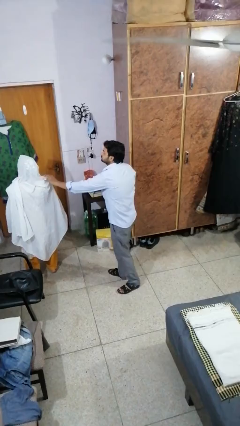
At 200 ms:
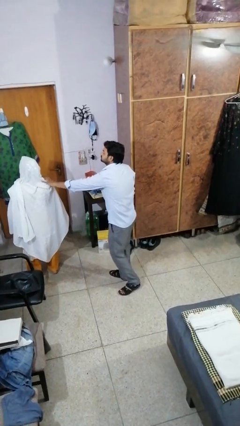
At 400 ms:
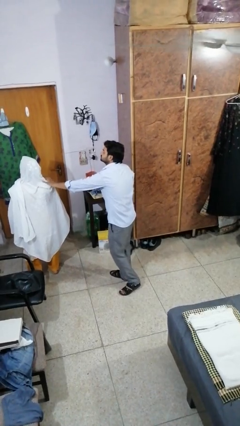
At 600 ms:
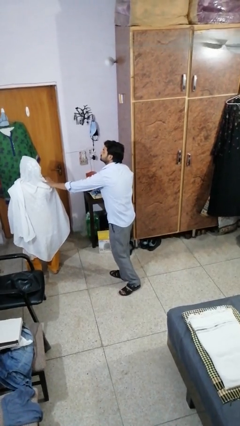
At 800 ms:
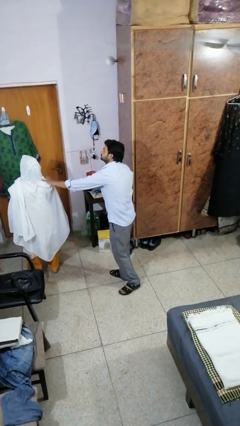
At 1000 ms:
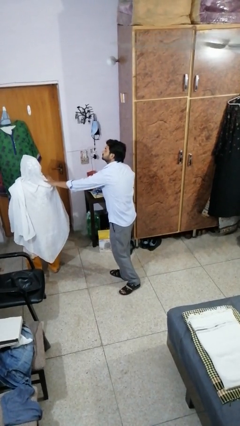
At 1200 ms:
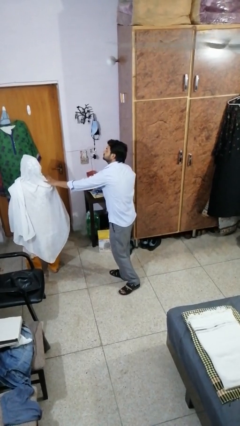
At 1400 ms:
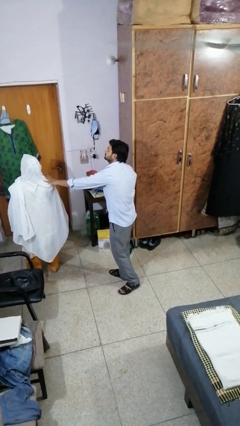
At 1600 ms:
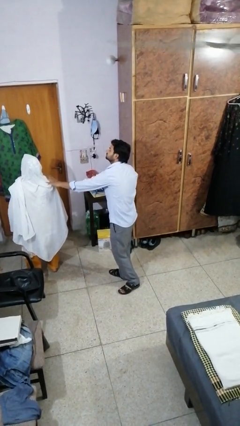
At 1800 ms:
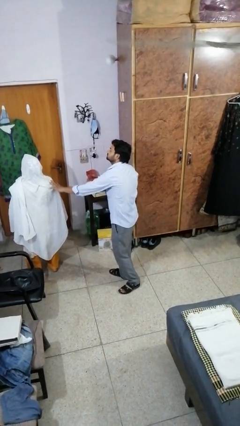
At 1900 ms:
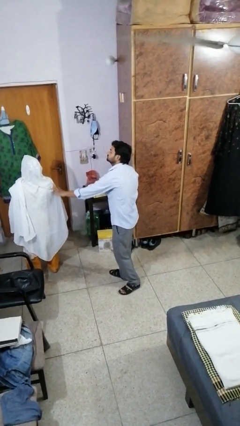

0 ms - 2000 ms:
person touches back of person

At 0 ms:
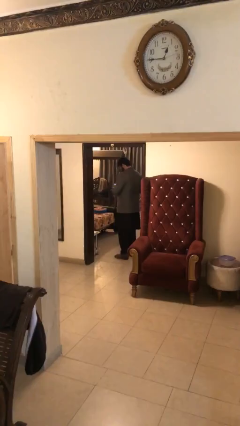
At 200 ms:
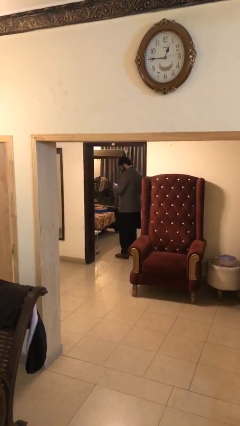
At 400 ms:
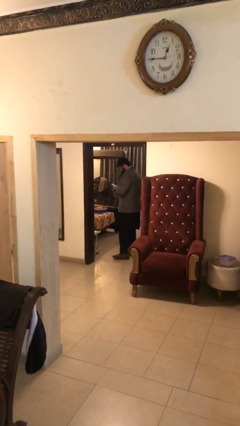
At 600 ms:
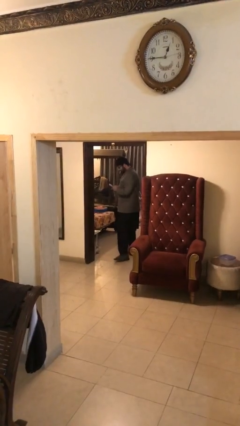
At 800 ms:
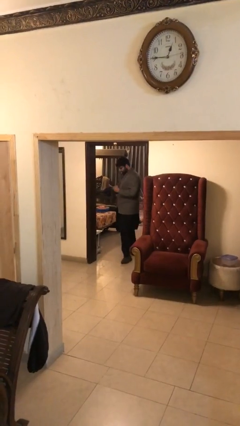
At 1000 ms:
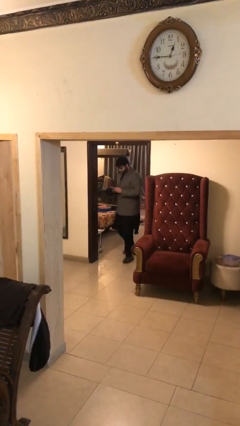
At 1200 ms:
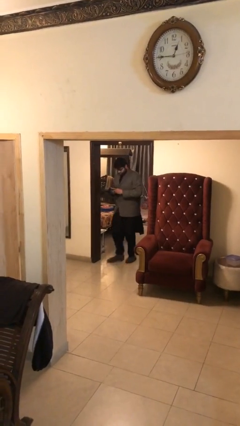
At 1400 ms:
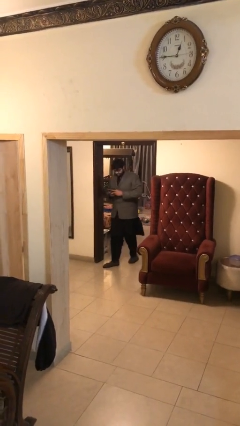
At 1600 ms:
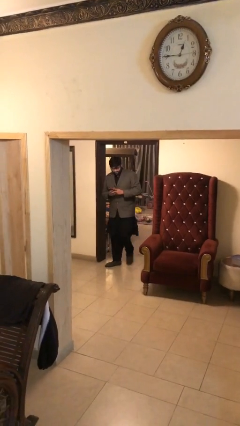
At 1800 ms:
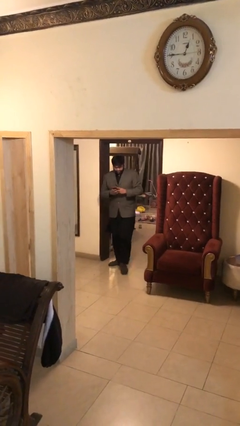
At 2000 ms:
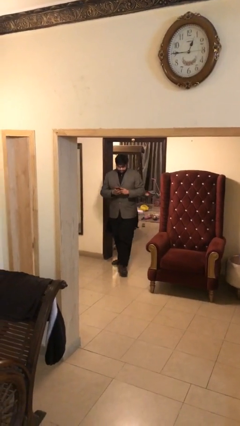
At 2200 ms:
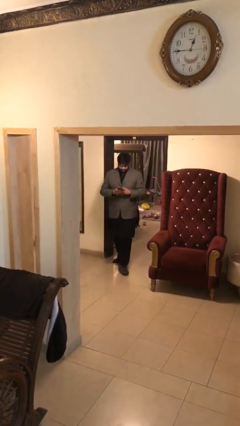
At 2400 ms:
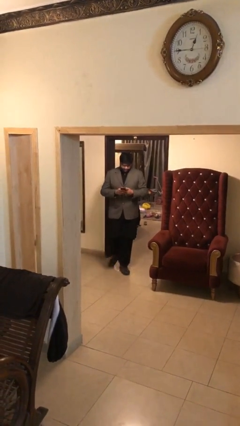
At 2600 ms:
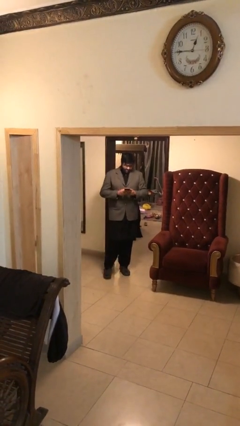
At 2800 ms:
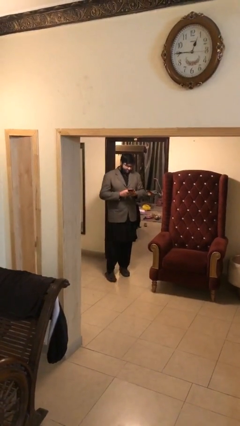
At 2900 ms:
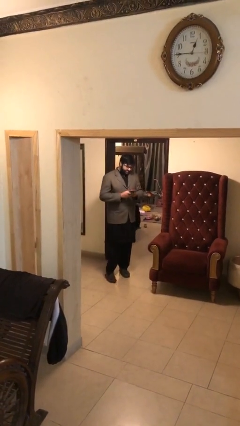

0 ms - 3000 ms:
person enters scene through structure

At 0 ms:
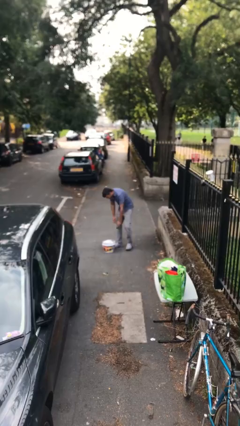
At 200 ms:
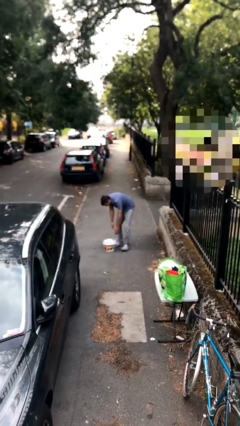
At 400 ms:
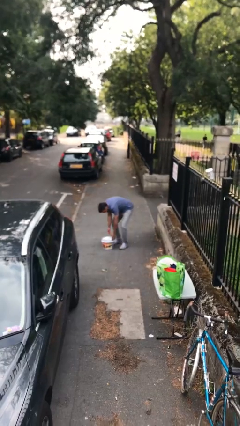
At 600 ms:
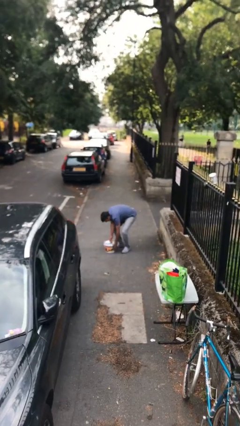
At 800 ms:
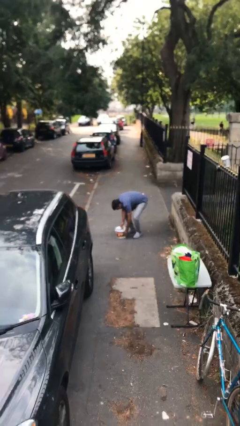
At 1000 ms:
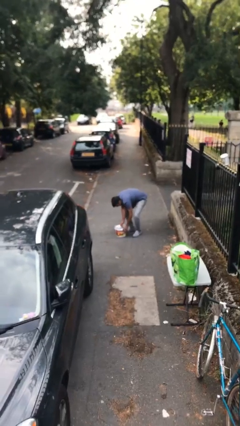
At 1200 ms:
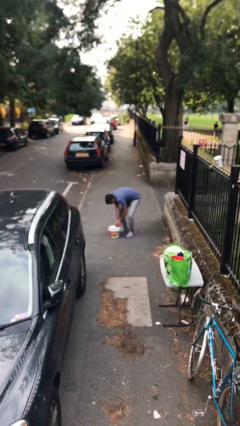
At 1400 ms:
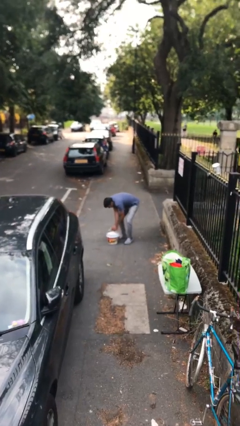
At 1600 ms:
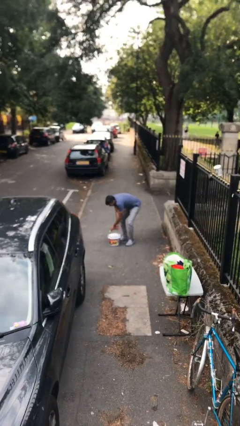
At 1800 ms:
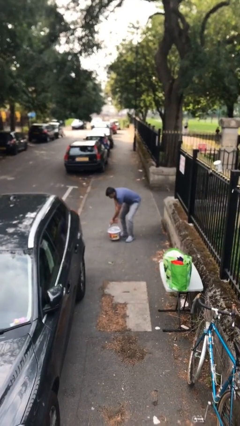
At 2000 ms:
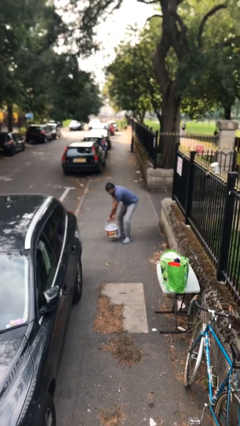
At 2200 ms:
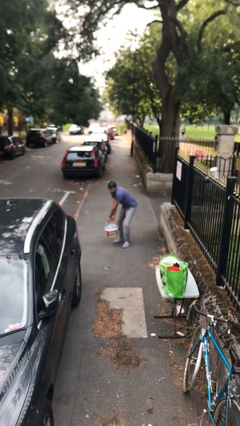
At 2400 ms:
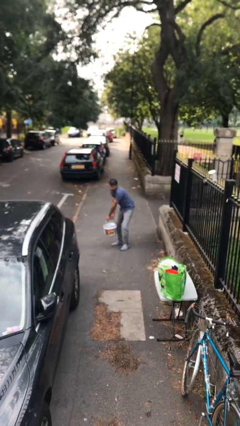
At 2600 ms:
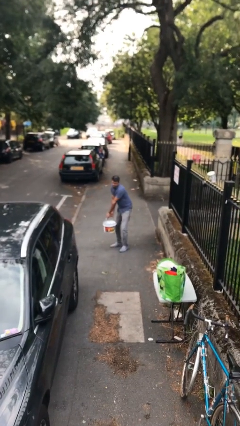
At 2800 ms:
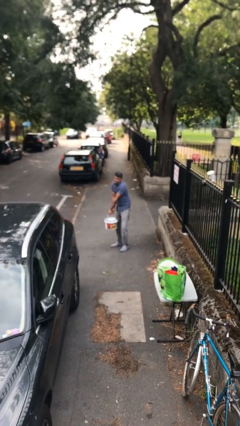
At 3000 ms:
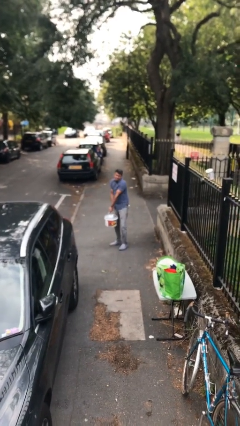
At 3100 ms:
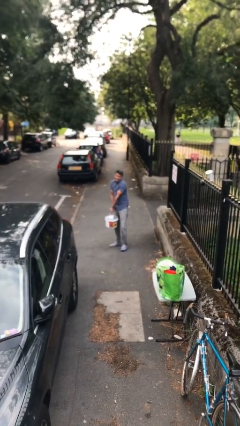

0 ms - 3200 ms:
person picks up object from floor

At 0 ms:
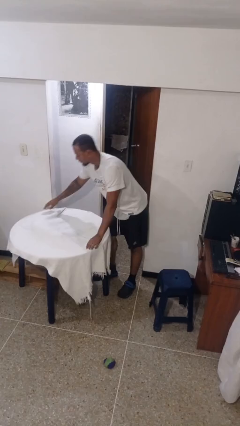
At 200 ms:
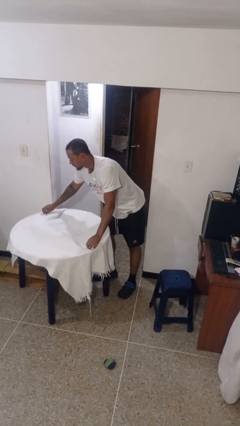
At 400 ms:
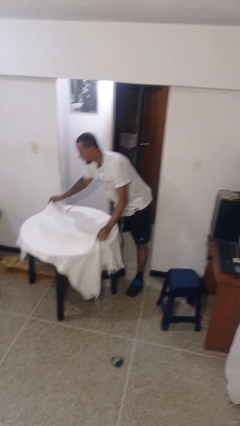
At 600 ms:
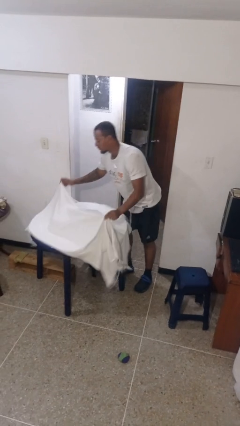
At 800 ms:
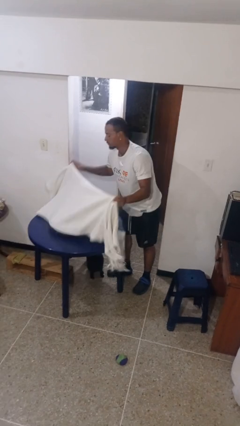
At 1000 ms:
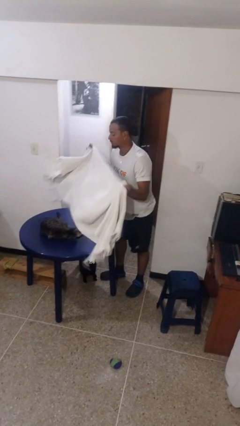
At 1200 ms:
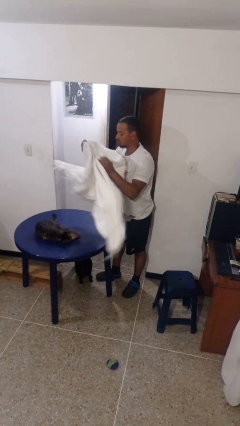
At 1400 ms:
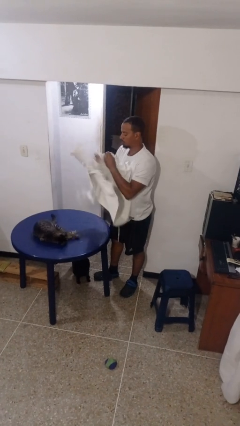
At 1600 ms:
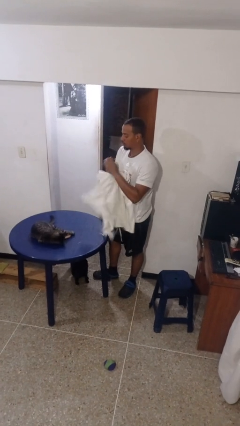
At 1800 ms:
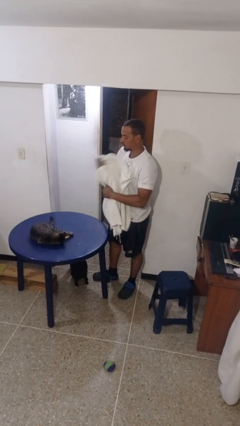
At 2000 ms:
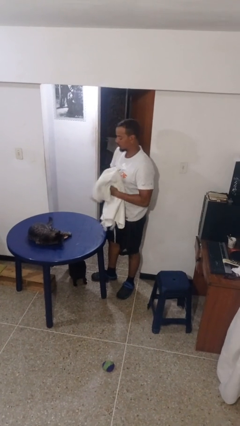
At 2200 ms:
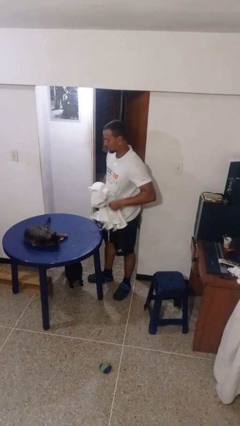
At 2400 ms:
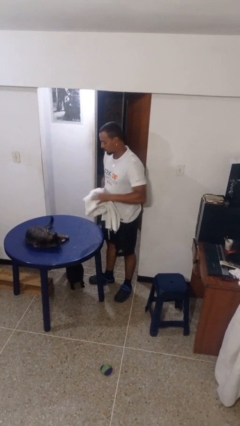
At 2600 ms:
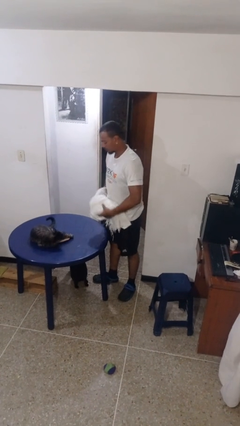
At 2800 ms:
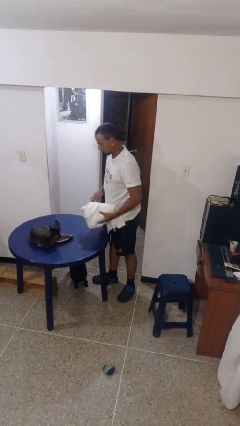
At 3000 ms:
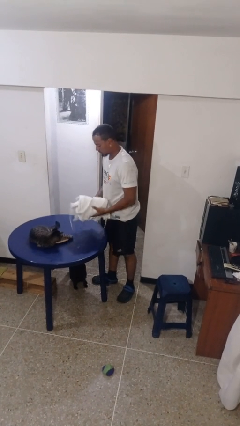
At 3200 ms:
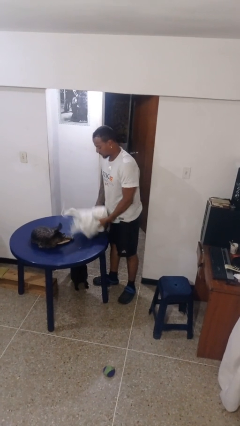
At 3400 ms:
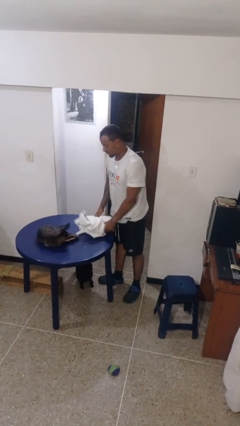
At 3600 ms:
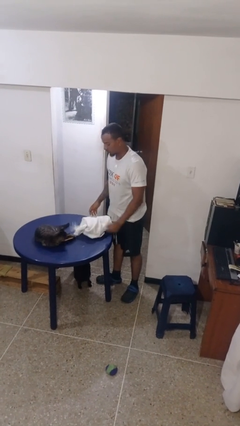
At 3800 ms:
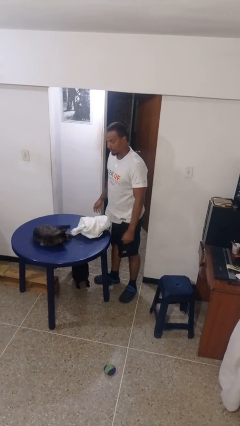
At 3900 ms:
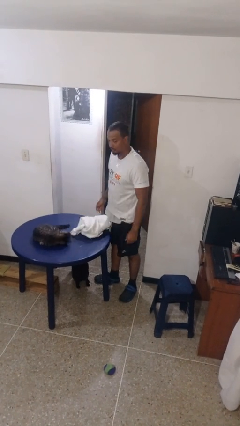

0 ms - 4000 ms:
person folds tablecloth

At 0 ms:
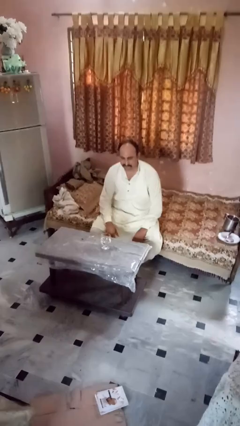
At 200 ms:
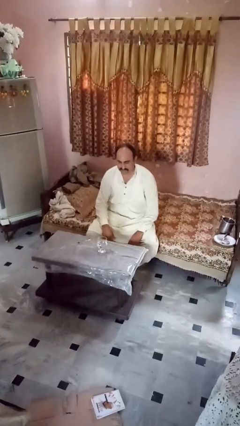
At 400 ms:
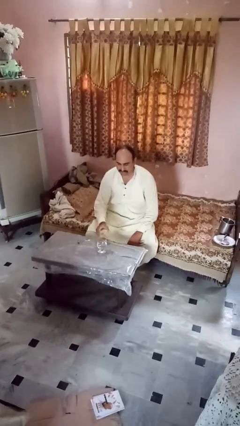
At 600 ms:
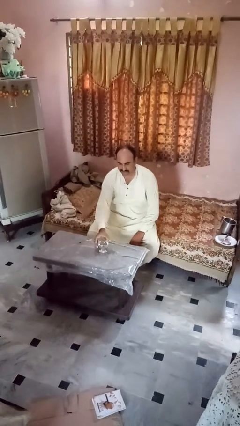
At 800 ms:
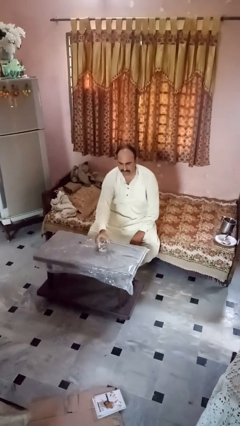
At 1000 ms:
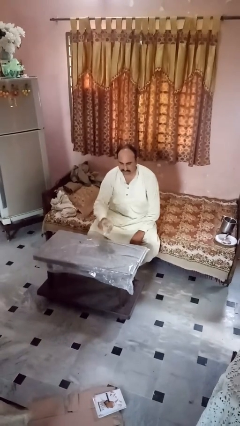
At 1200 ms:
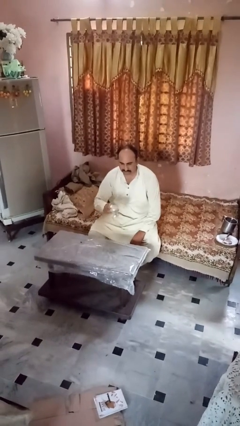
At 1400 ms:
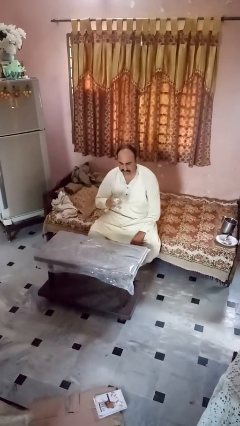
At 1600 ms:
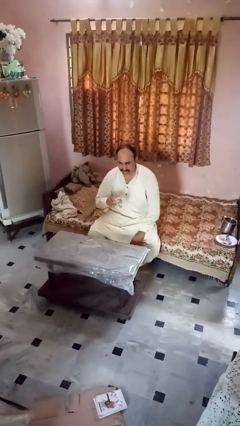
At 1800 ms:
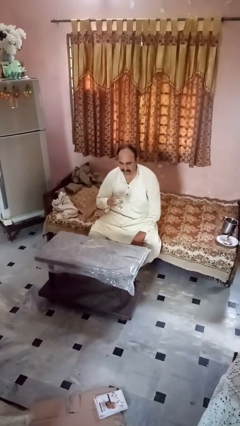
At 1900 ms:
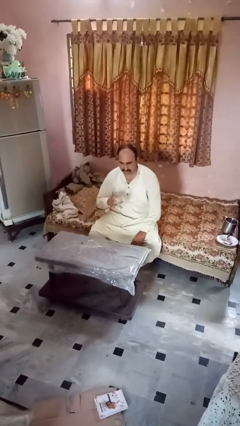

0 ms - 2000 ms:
person picks up object from table

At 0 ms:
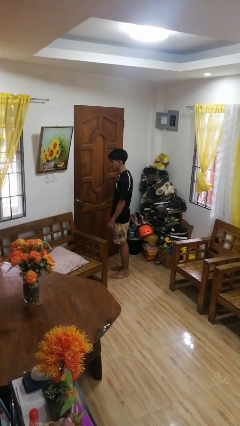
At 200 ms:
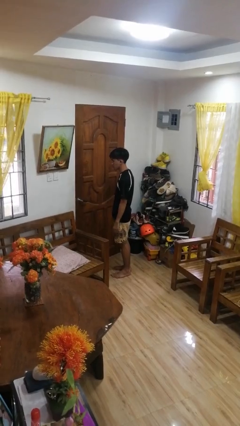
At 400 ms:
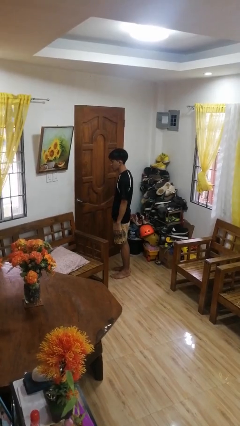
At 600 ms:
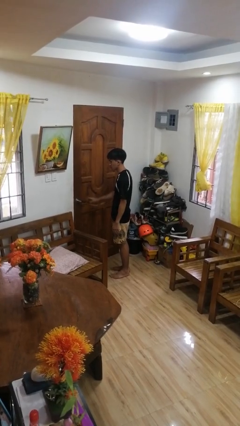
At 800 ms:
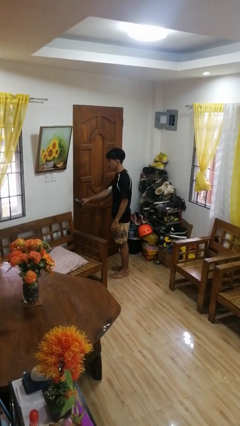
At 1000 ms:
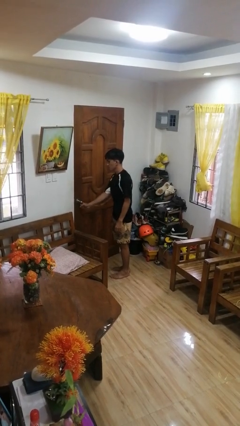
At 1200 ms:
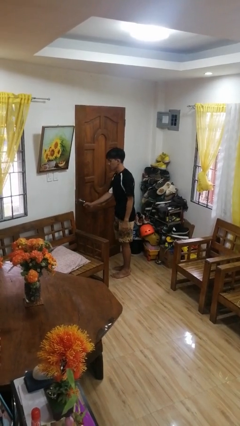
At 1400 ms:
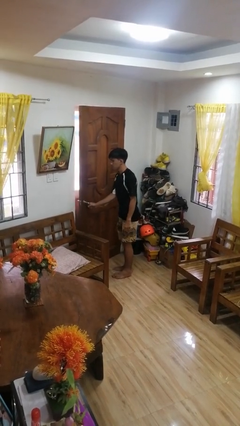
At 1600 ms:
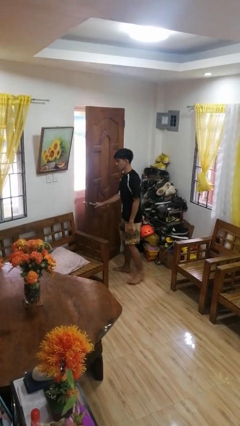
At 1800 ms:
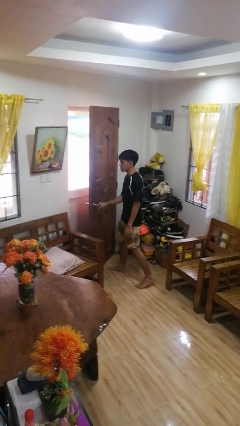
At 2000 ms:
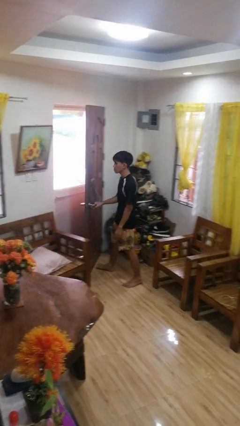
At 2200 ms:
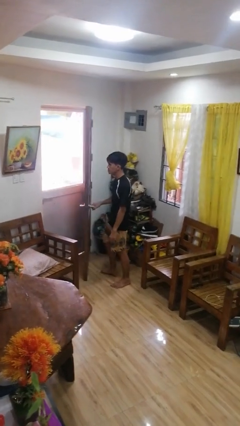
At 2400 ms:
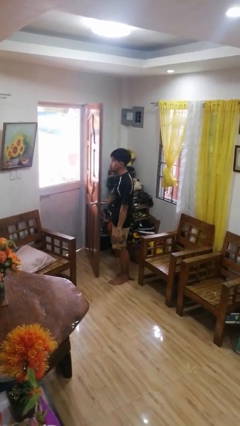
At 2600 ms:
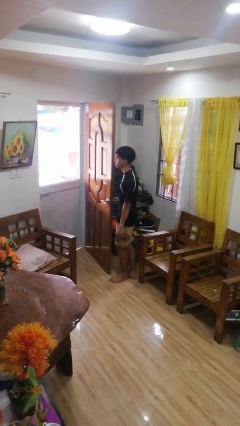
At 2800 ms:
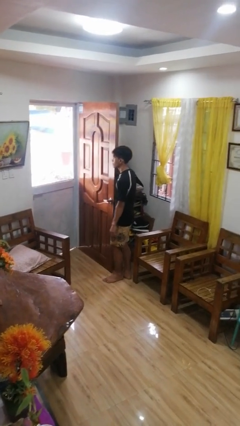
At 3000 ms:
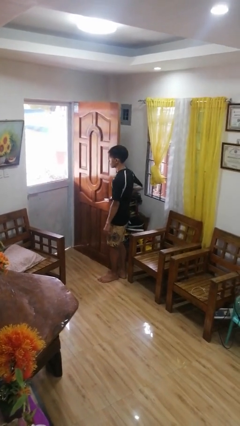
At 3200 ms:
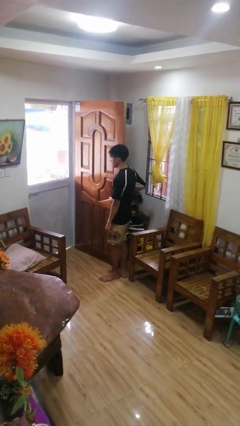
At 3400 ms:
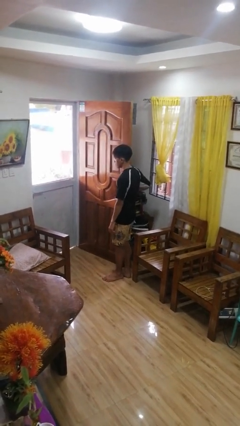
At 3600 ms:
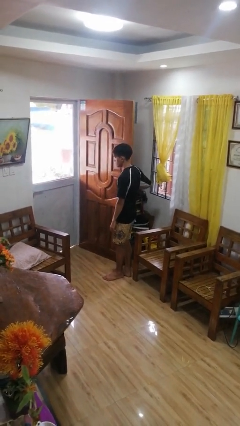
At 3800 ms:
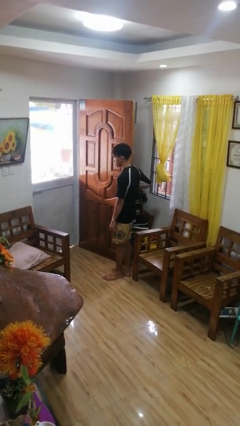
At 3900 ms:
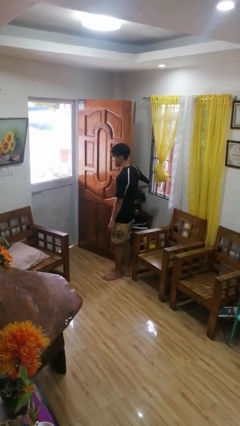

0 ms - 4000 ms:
person opens facility door
